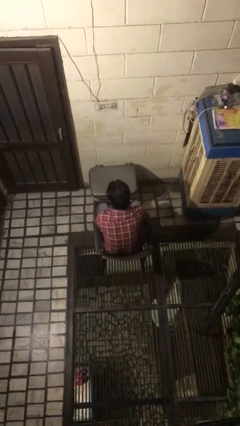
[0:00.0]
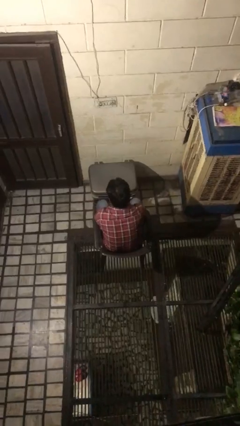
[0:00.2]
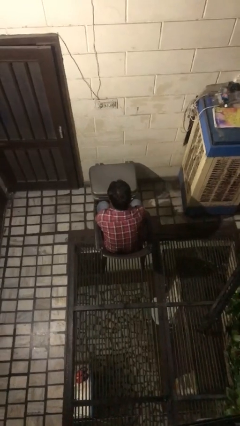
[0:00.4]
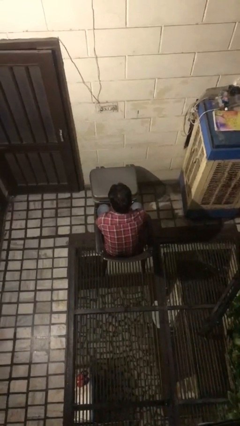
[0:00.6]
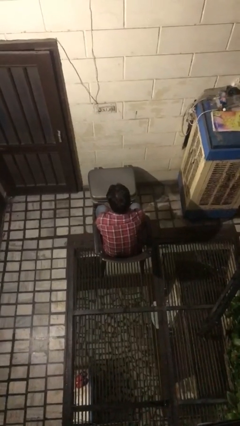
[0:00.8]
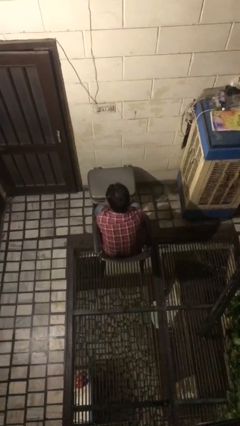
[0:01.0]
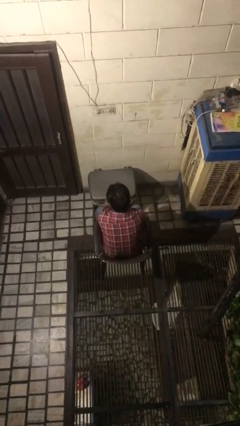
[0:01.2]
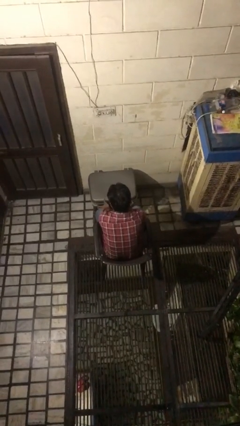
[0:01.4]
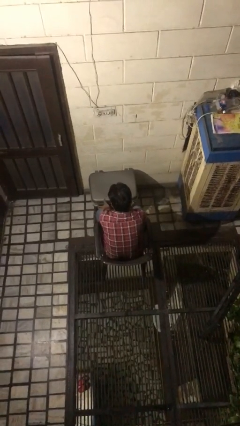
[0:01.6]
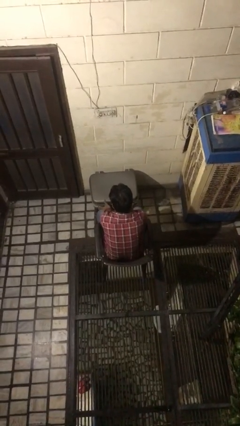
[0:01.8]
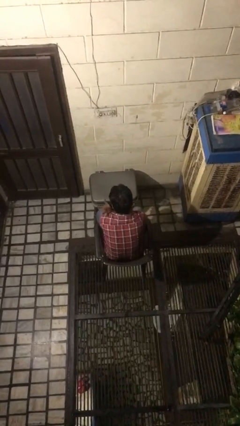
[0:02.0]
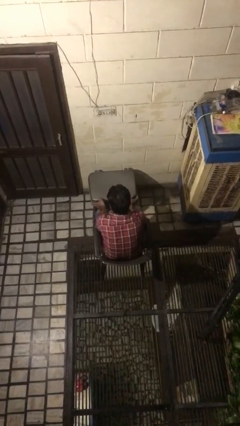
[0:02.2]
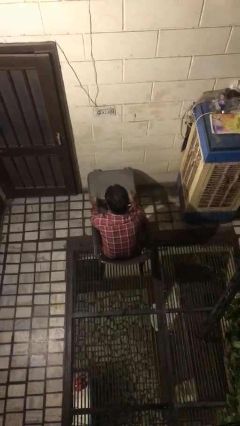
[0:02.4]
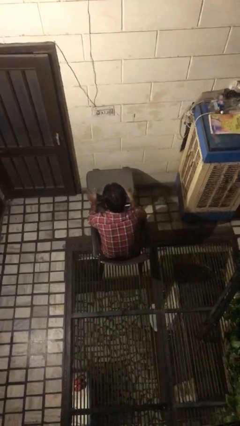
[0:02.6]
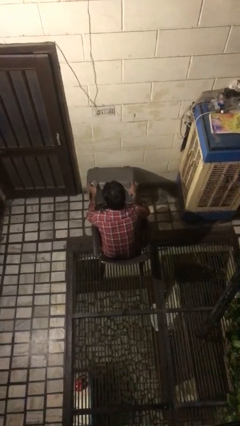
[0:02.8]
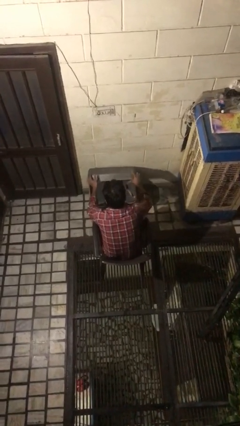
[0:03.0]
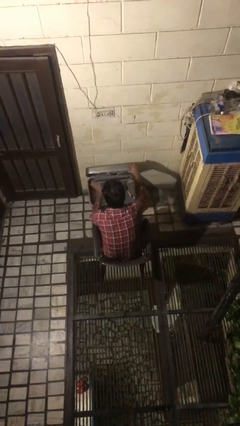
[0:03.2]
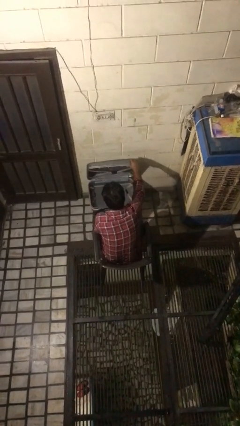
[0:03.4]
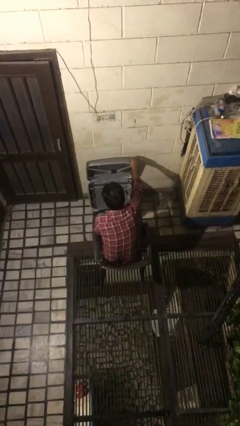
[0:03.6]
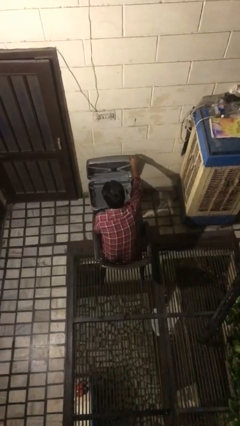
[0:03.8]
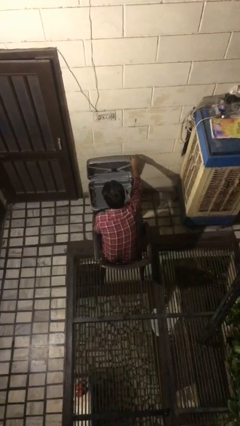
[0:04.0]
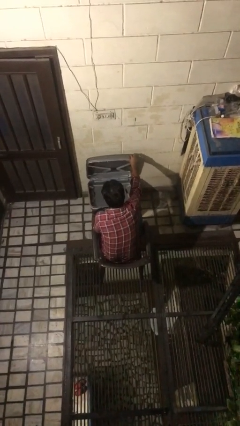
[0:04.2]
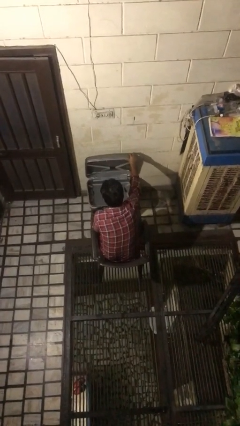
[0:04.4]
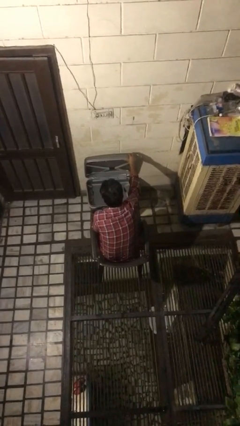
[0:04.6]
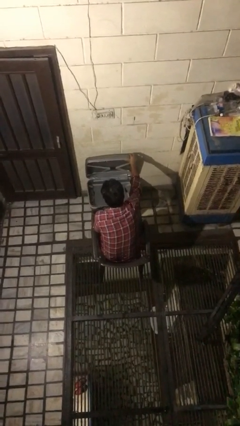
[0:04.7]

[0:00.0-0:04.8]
person opens suitcase

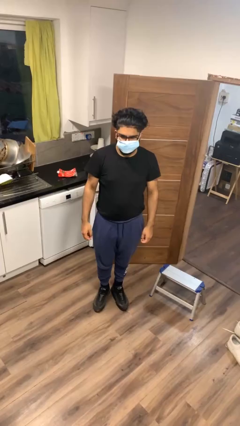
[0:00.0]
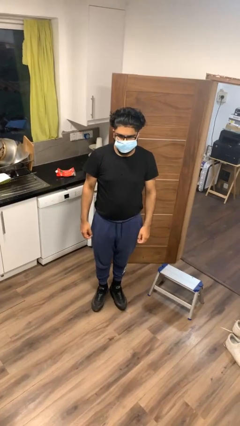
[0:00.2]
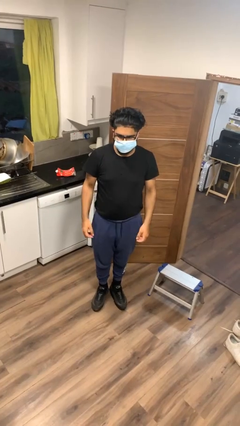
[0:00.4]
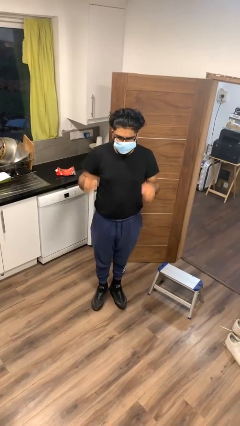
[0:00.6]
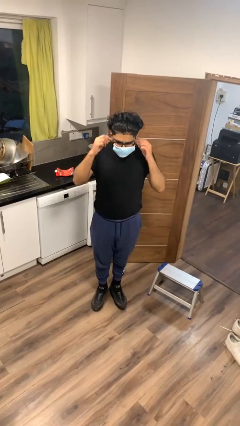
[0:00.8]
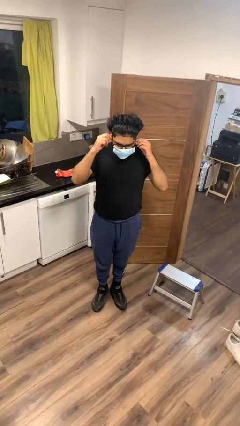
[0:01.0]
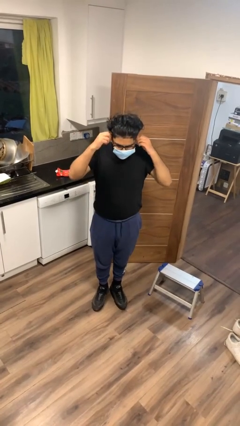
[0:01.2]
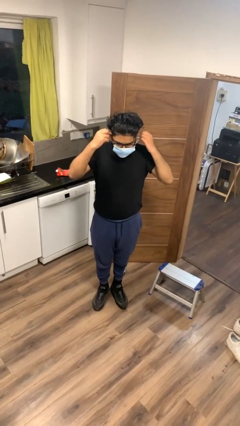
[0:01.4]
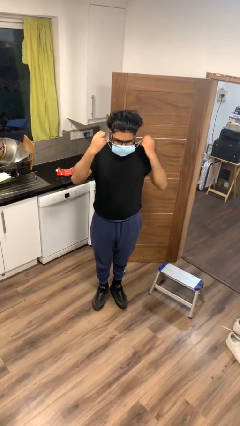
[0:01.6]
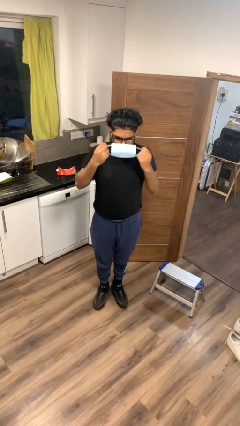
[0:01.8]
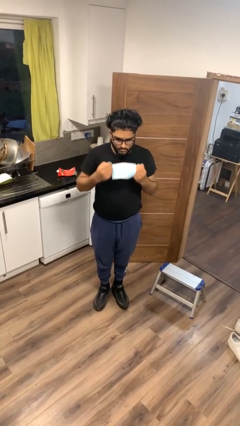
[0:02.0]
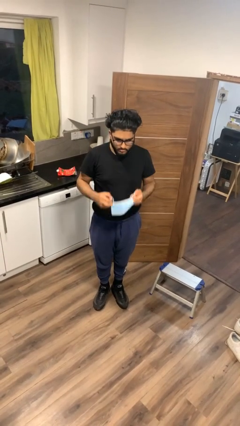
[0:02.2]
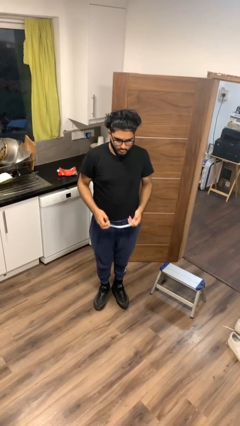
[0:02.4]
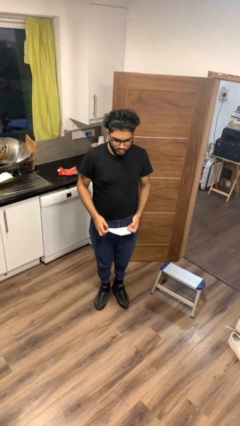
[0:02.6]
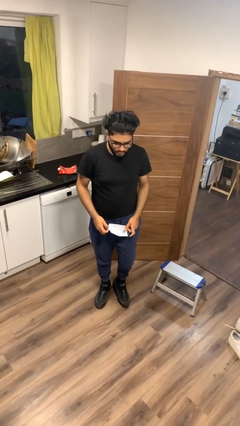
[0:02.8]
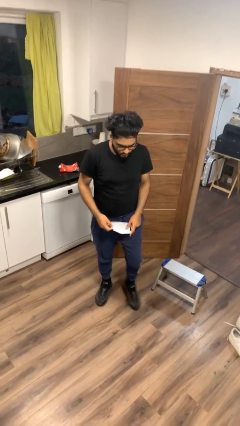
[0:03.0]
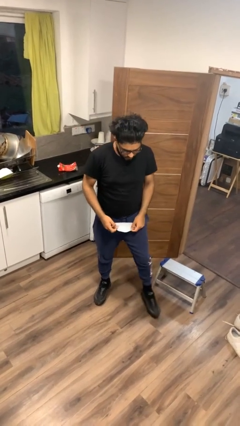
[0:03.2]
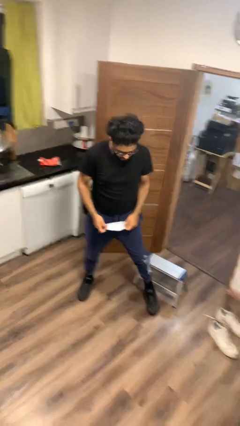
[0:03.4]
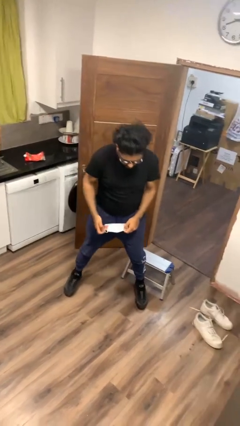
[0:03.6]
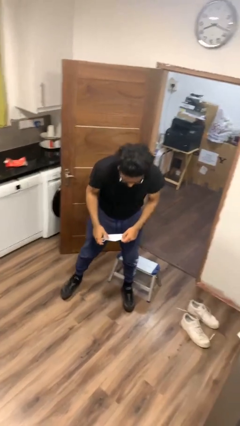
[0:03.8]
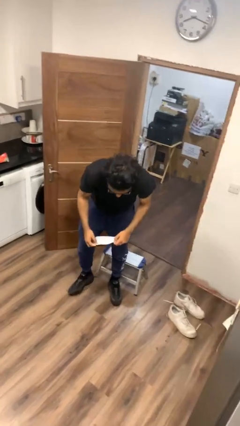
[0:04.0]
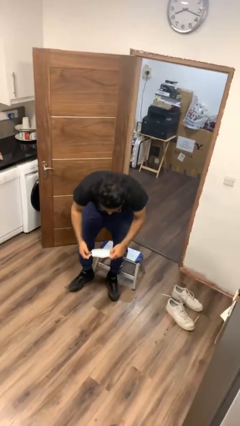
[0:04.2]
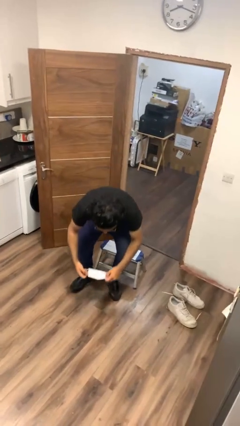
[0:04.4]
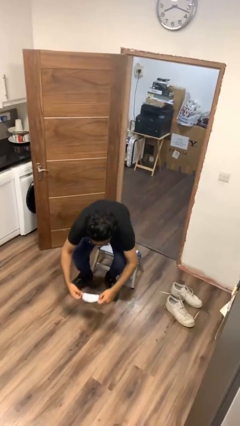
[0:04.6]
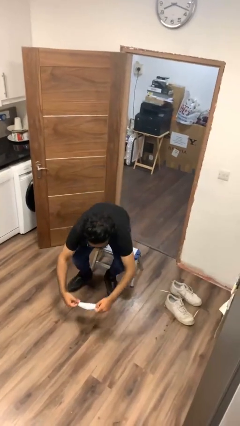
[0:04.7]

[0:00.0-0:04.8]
person takes off facemask

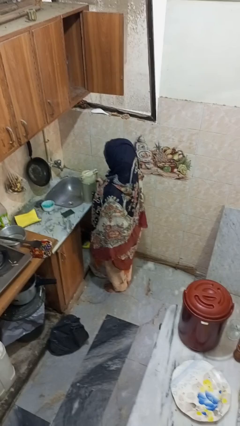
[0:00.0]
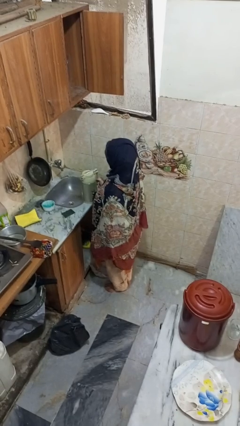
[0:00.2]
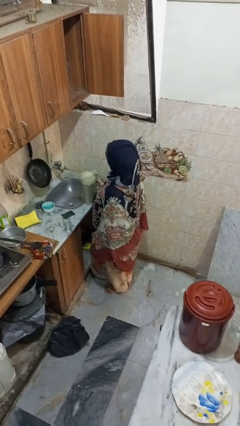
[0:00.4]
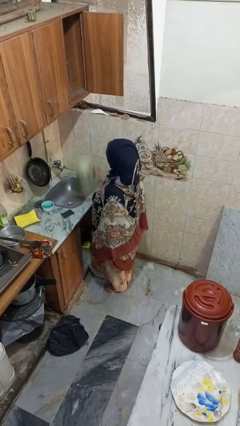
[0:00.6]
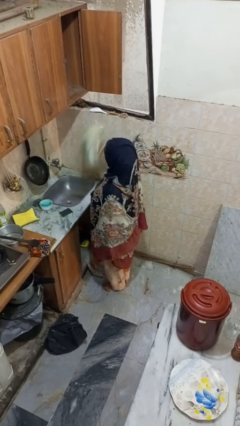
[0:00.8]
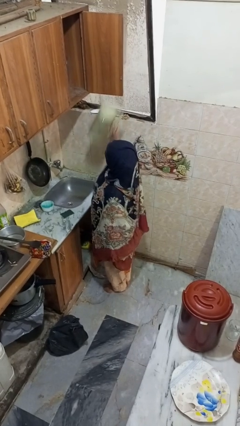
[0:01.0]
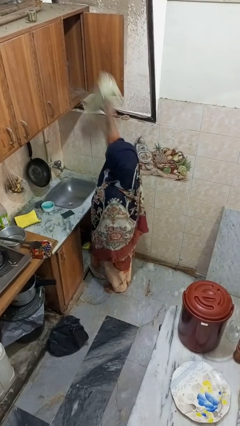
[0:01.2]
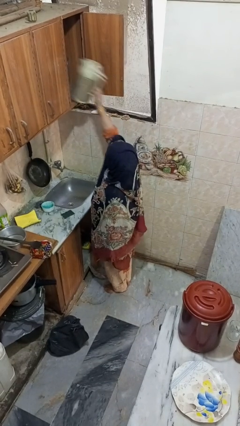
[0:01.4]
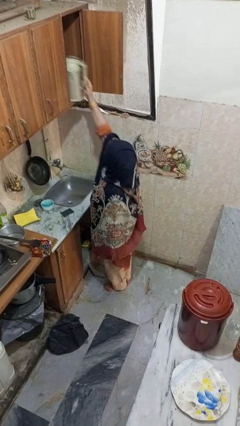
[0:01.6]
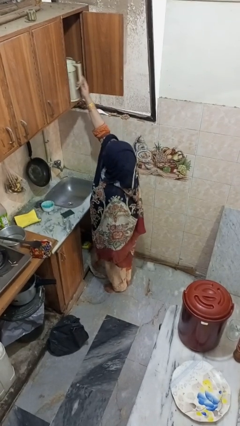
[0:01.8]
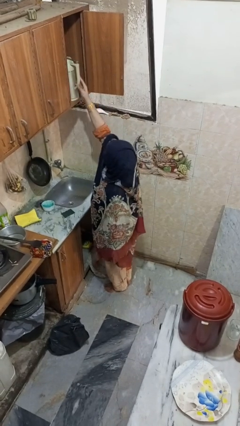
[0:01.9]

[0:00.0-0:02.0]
person takes object from cabinet

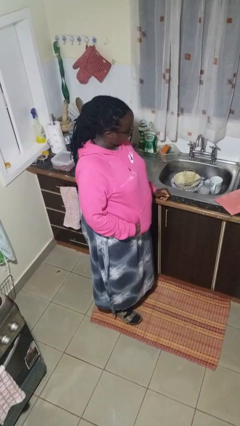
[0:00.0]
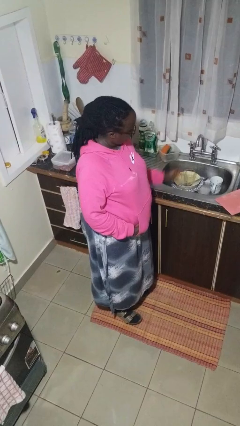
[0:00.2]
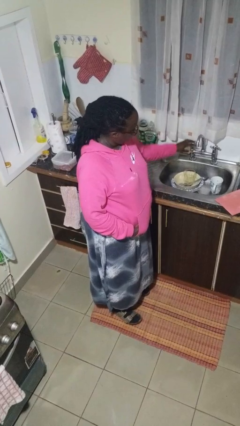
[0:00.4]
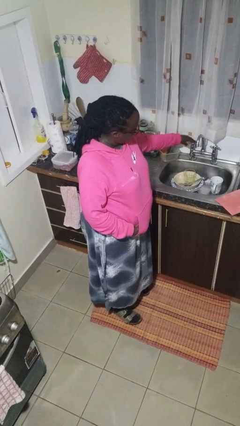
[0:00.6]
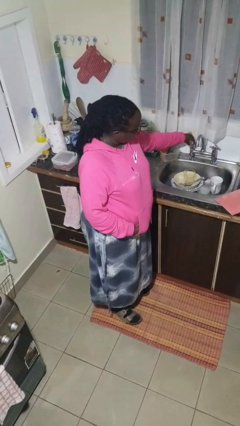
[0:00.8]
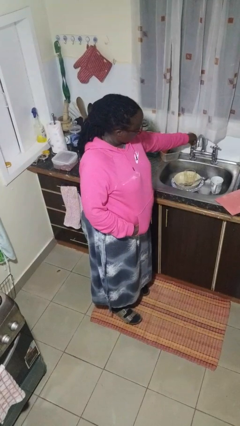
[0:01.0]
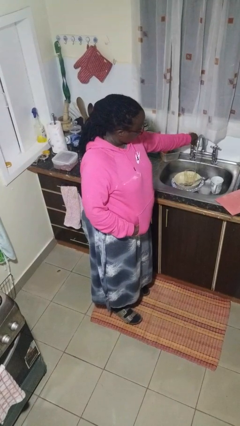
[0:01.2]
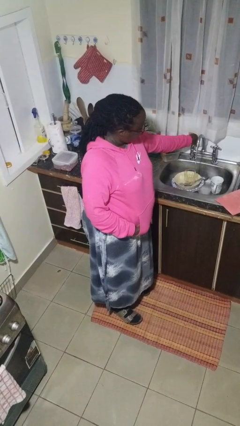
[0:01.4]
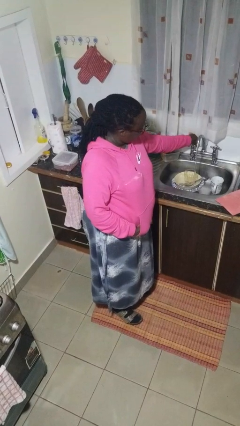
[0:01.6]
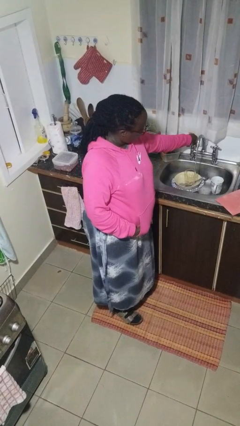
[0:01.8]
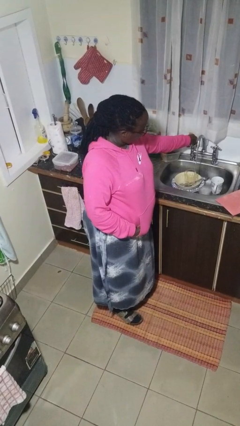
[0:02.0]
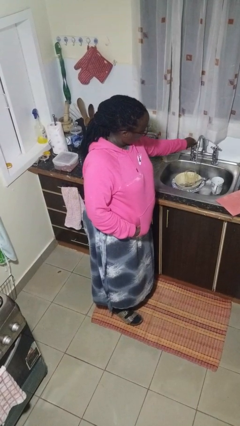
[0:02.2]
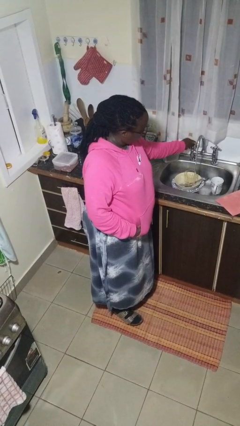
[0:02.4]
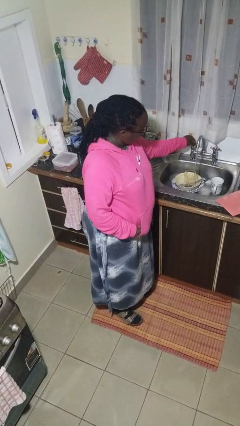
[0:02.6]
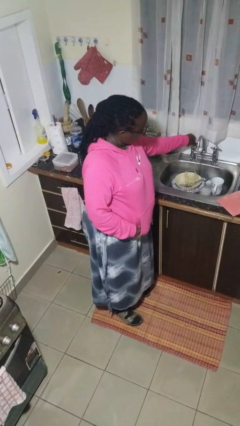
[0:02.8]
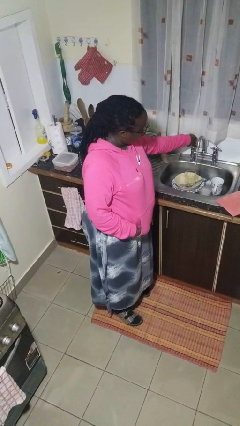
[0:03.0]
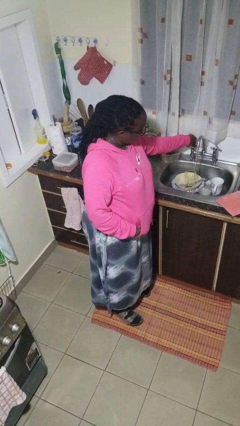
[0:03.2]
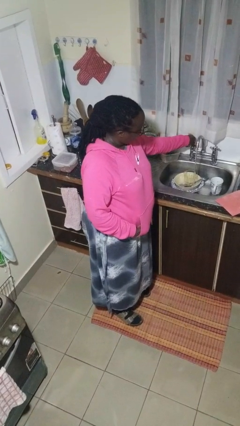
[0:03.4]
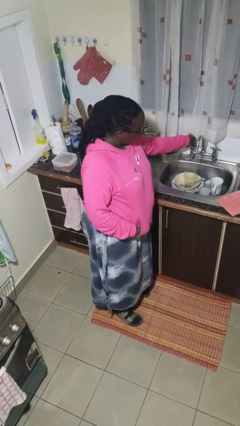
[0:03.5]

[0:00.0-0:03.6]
person turns on faucet

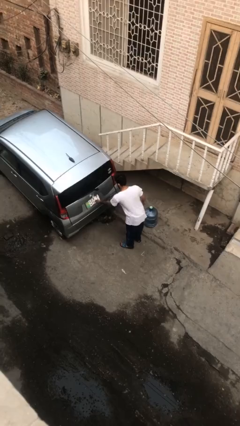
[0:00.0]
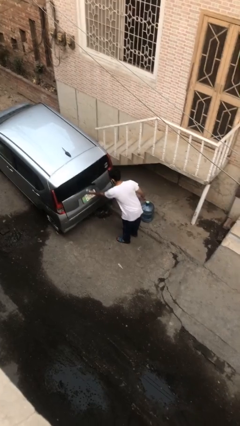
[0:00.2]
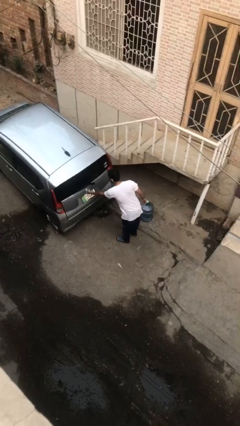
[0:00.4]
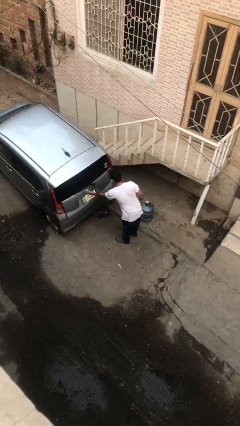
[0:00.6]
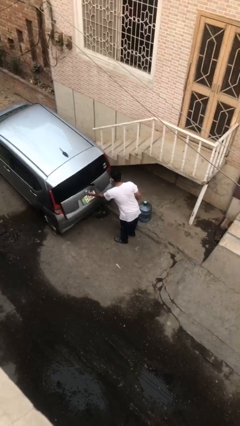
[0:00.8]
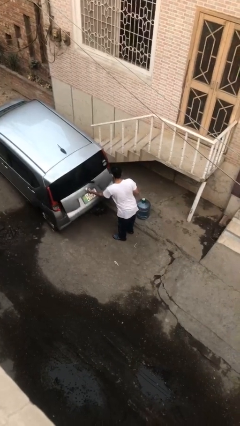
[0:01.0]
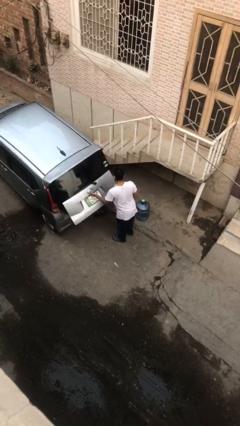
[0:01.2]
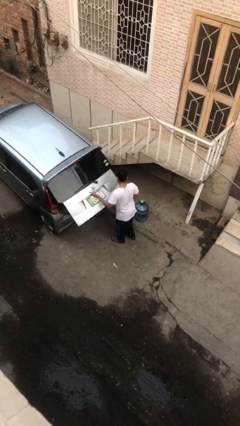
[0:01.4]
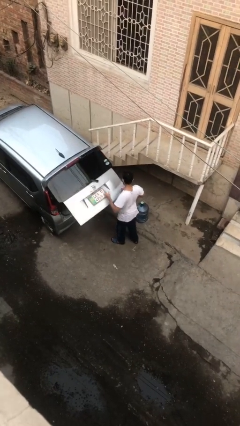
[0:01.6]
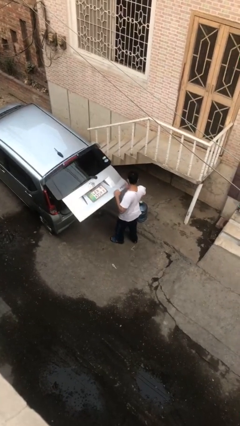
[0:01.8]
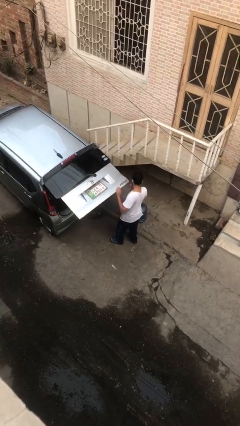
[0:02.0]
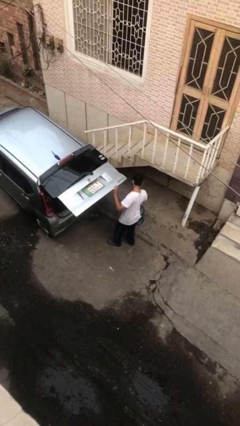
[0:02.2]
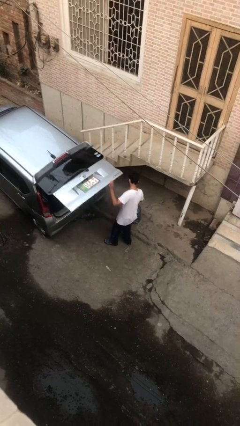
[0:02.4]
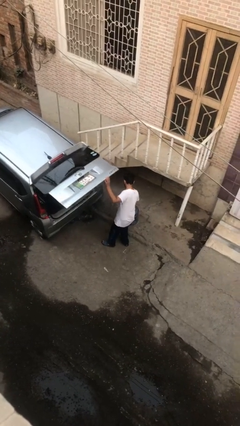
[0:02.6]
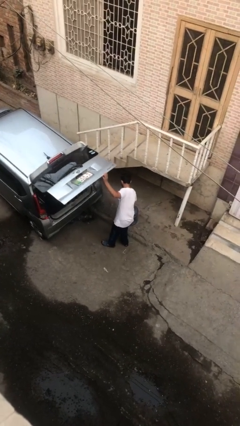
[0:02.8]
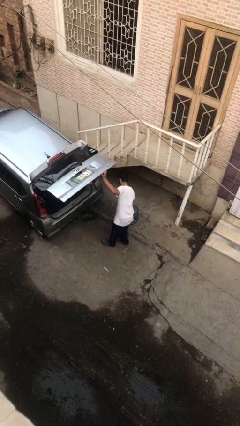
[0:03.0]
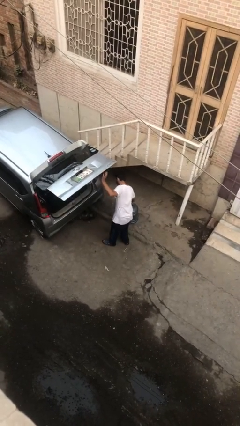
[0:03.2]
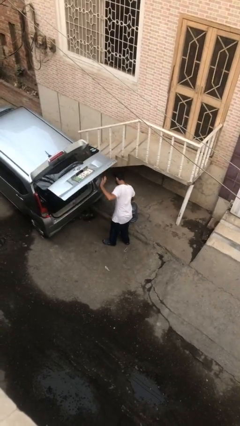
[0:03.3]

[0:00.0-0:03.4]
person opens car trunk
